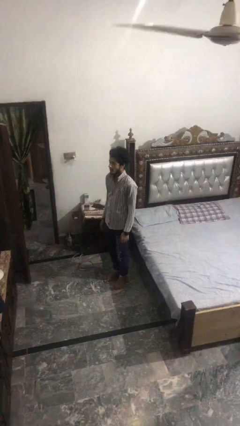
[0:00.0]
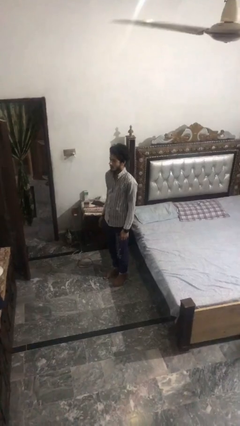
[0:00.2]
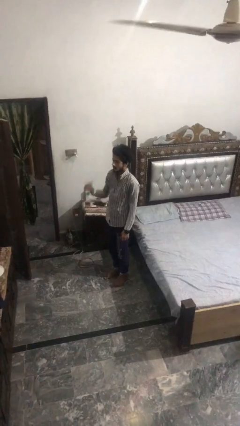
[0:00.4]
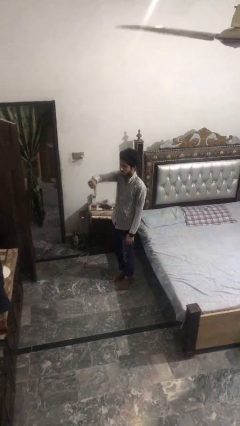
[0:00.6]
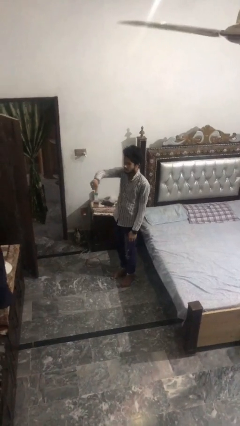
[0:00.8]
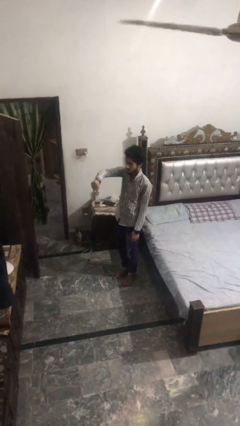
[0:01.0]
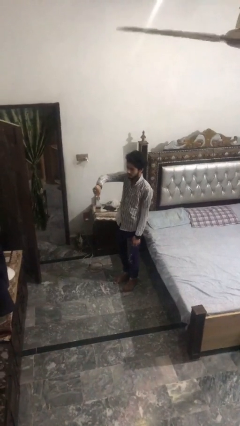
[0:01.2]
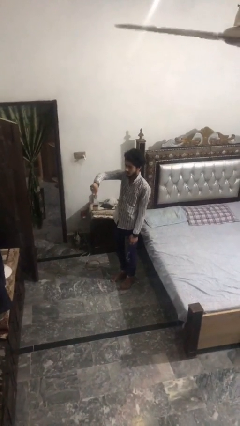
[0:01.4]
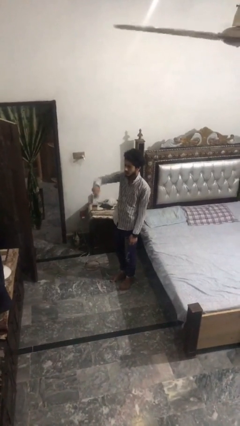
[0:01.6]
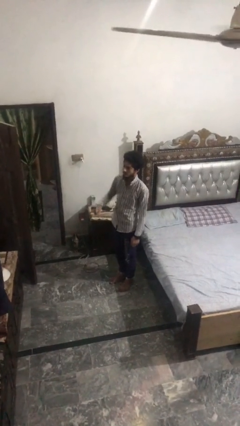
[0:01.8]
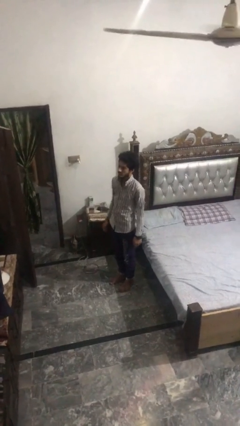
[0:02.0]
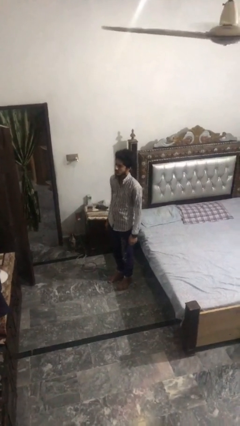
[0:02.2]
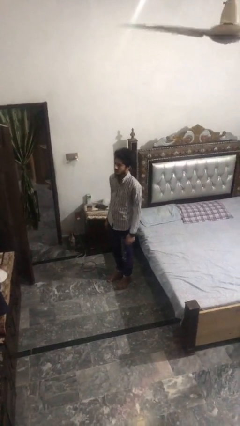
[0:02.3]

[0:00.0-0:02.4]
person gestures thumbs down

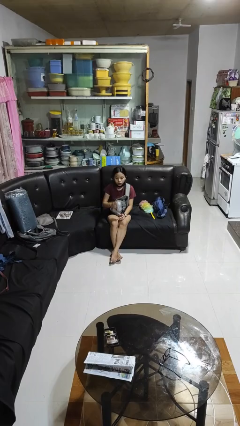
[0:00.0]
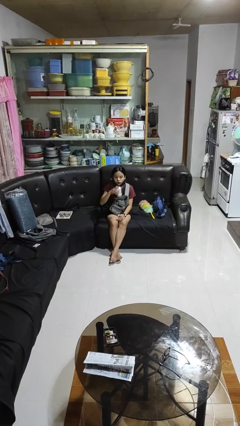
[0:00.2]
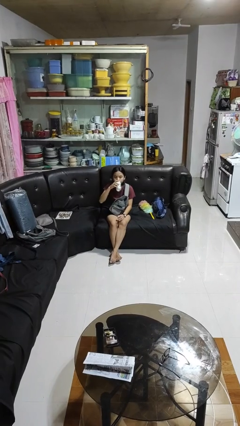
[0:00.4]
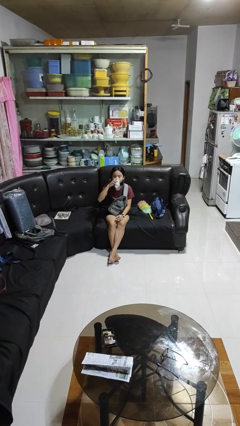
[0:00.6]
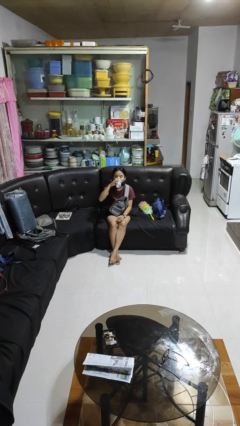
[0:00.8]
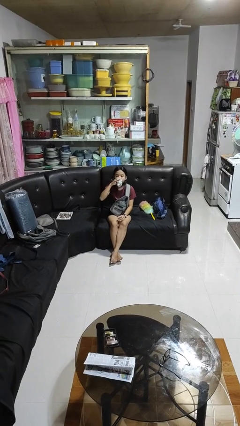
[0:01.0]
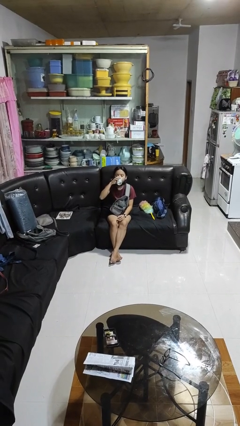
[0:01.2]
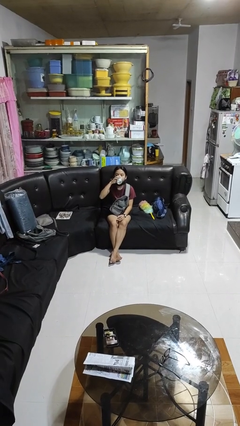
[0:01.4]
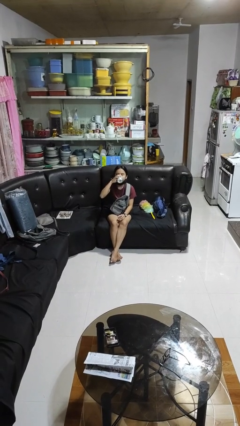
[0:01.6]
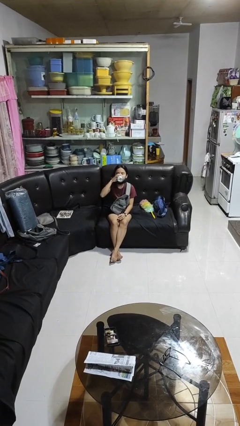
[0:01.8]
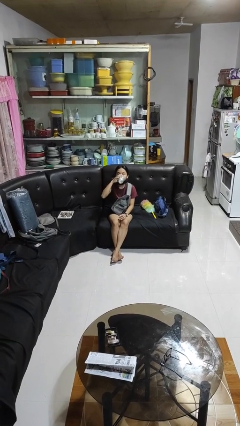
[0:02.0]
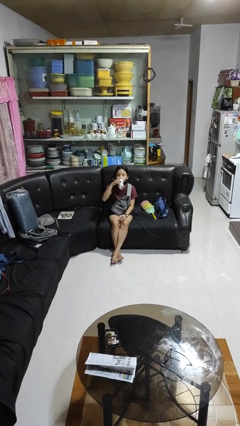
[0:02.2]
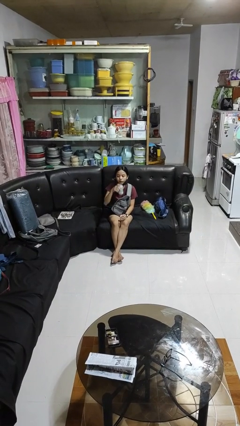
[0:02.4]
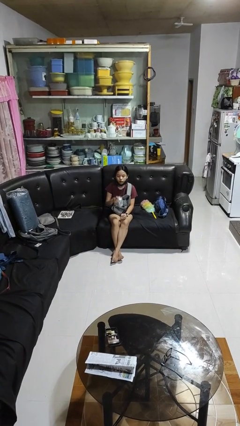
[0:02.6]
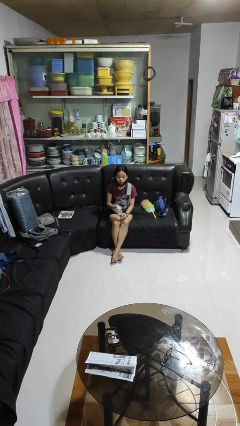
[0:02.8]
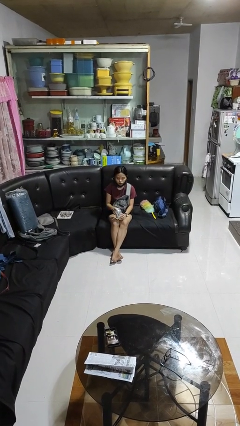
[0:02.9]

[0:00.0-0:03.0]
person drinks from beverage can

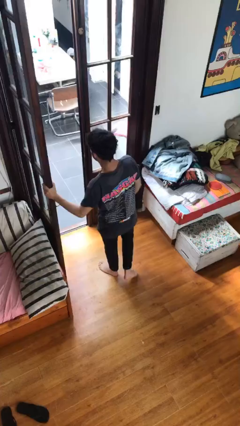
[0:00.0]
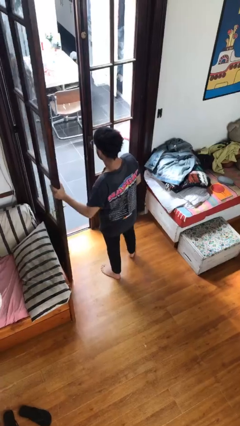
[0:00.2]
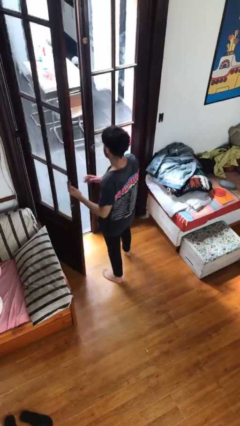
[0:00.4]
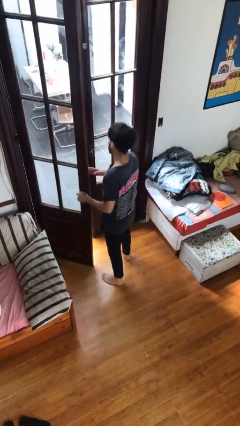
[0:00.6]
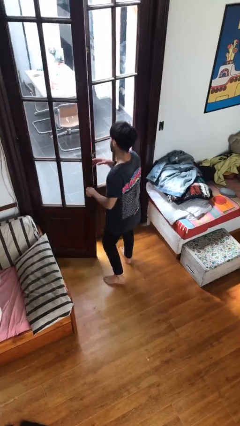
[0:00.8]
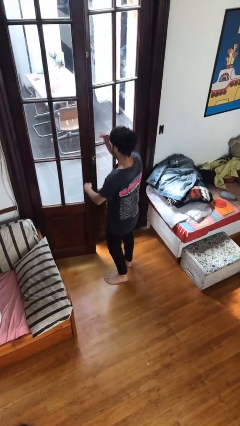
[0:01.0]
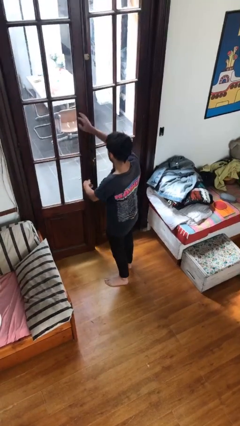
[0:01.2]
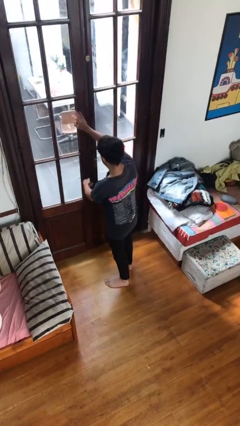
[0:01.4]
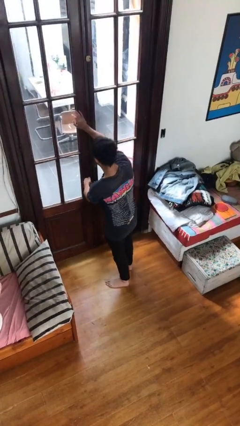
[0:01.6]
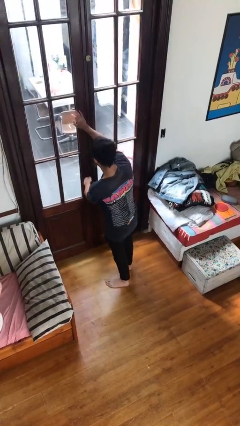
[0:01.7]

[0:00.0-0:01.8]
person closes facility door

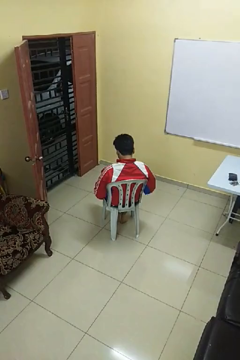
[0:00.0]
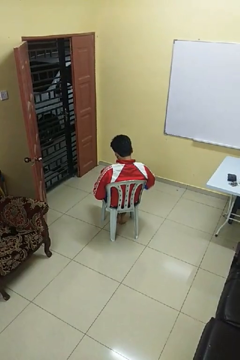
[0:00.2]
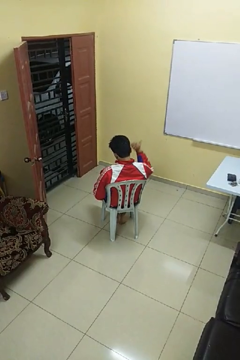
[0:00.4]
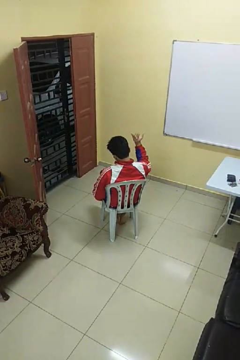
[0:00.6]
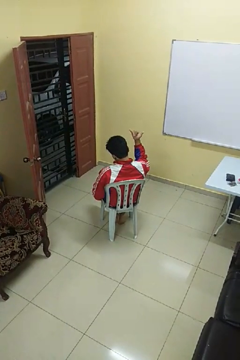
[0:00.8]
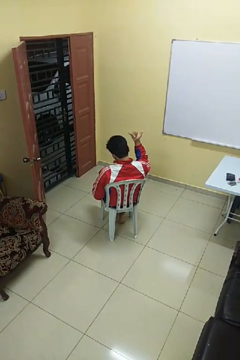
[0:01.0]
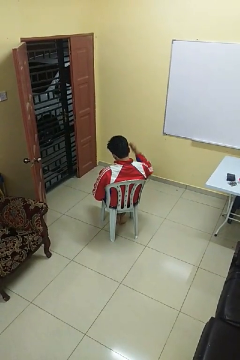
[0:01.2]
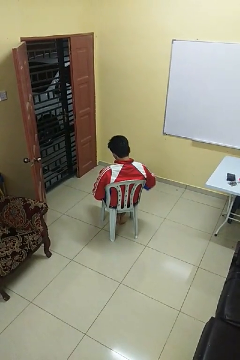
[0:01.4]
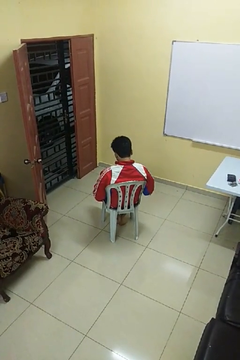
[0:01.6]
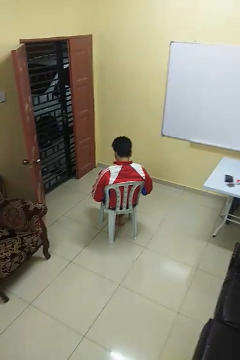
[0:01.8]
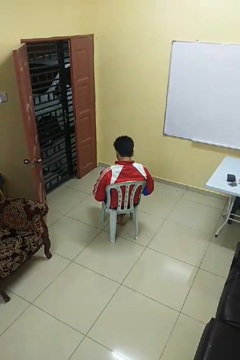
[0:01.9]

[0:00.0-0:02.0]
person gestures hang loose

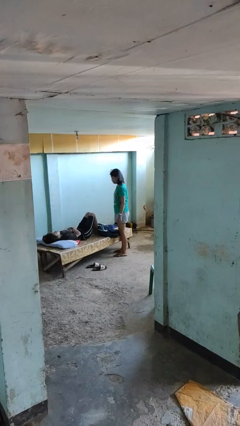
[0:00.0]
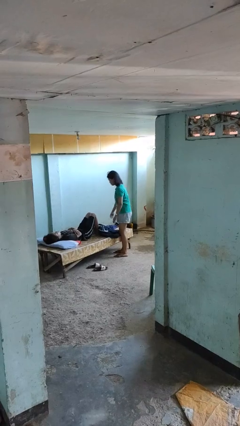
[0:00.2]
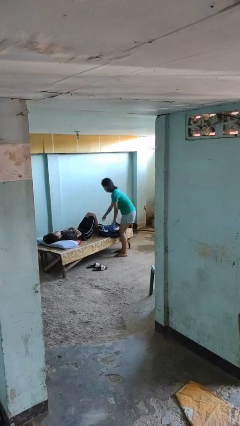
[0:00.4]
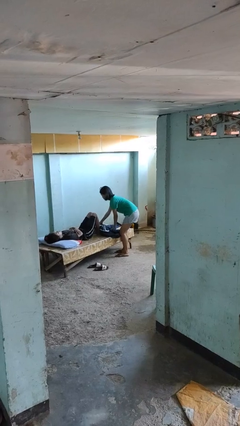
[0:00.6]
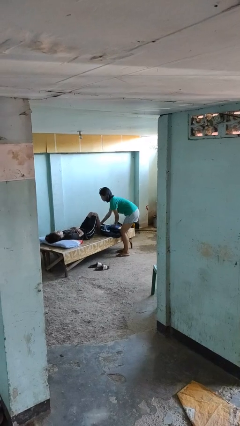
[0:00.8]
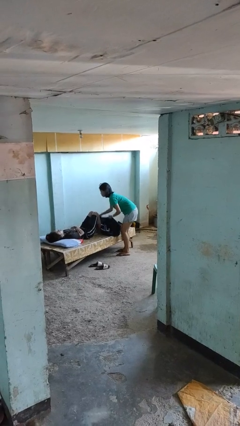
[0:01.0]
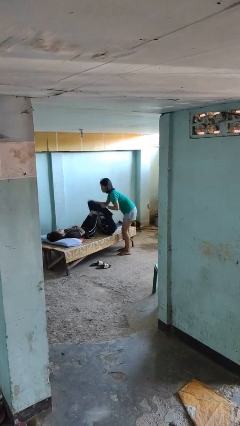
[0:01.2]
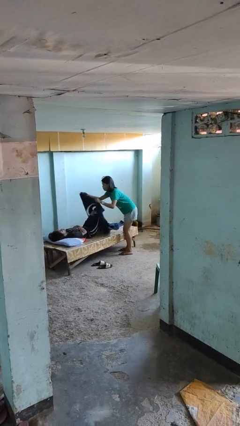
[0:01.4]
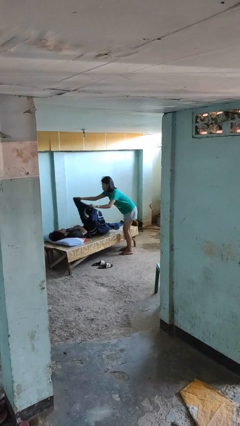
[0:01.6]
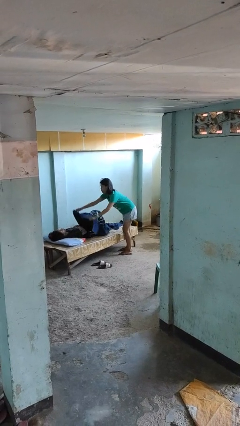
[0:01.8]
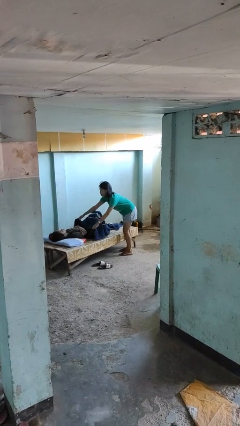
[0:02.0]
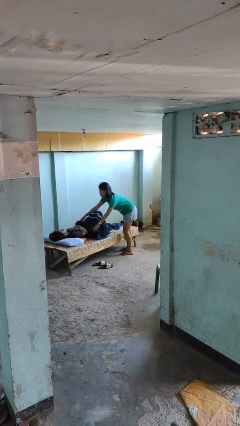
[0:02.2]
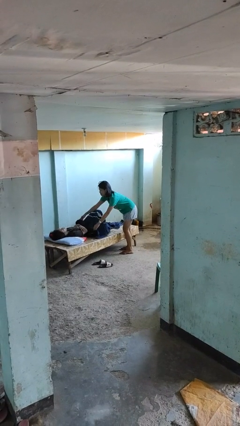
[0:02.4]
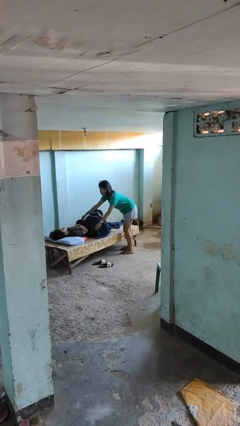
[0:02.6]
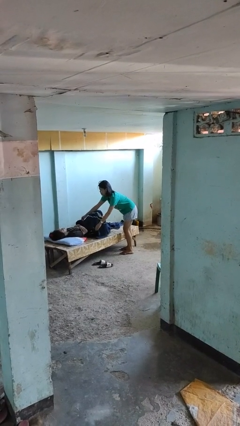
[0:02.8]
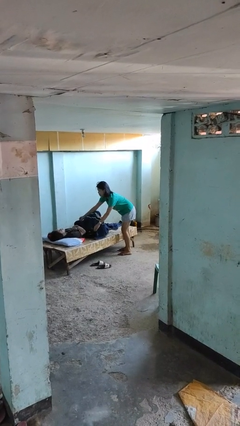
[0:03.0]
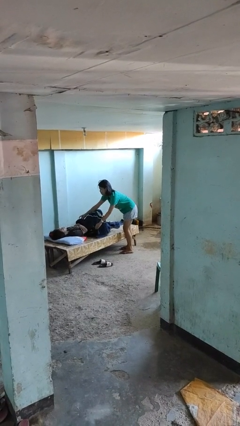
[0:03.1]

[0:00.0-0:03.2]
person covers friend with blanket

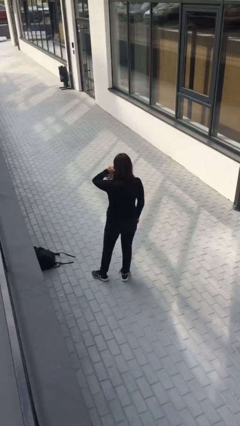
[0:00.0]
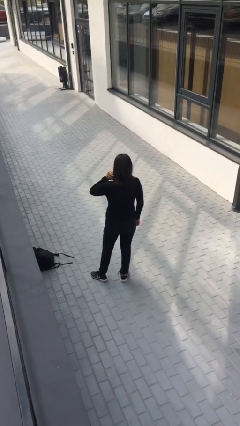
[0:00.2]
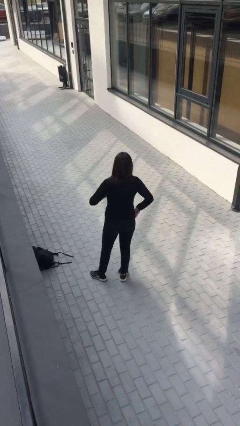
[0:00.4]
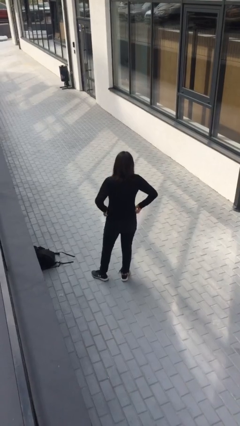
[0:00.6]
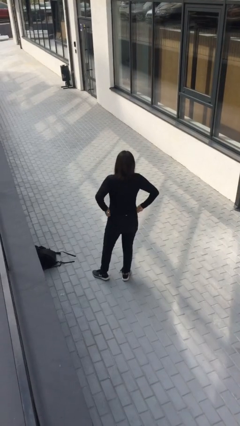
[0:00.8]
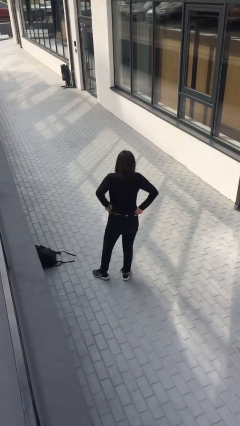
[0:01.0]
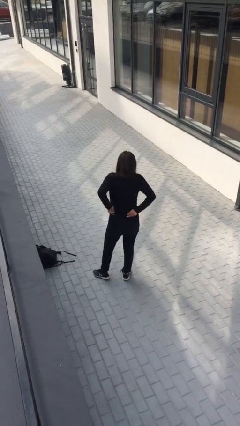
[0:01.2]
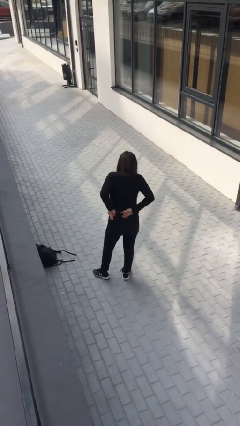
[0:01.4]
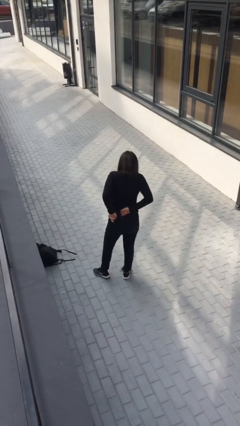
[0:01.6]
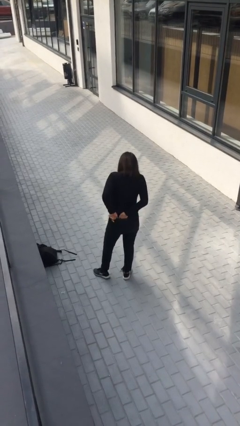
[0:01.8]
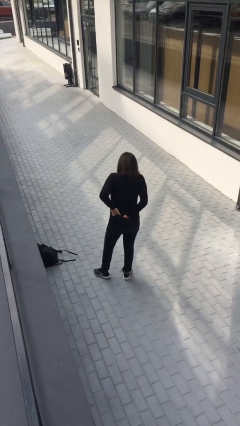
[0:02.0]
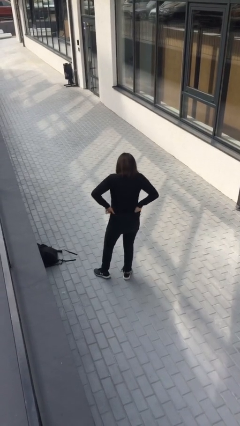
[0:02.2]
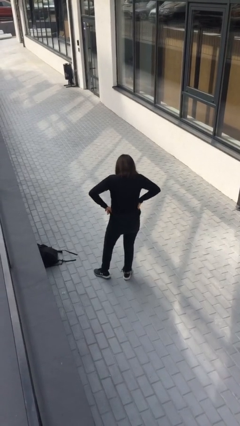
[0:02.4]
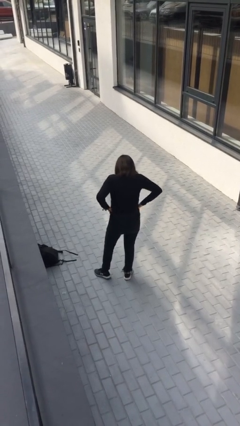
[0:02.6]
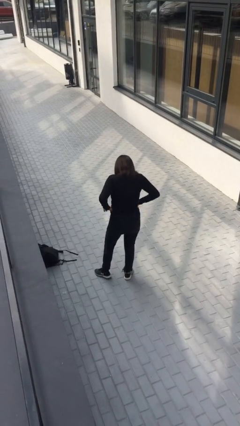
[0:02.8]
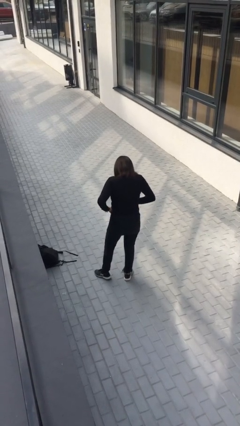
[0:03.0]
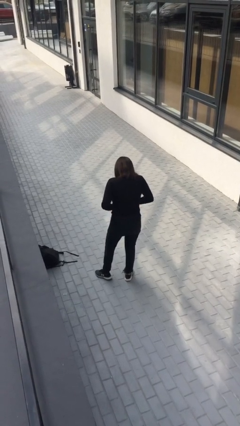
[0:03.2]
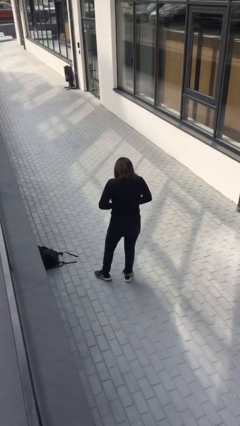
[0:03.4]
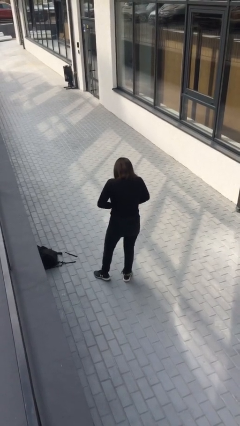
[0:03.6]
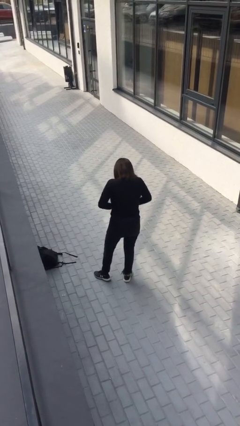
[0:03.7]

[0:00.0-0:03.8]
person tucks in shirt

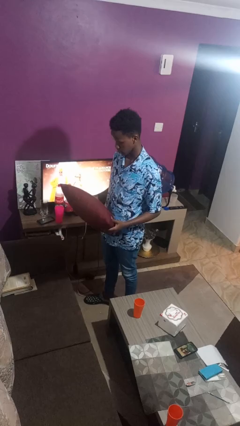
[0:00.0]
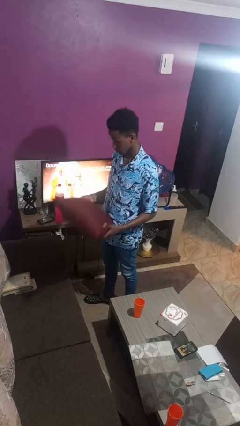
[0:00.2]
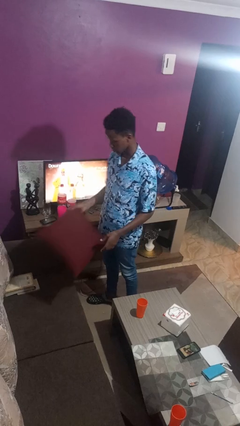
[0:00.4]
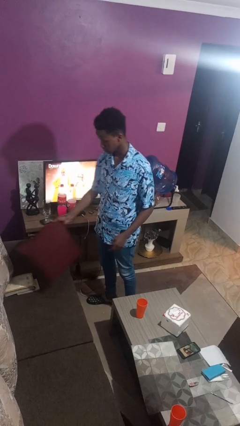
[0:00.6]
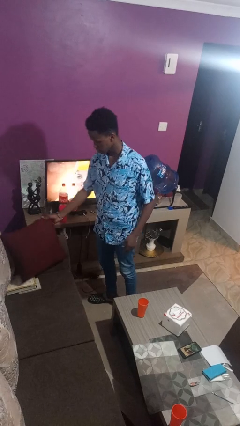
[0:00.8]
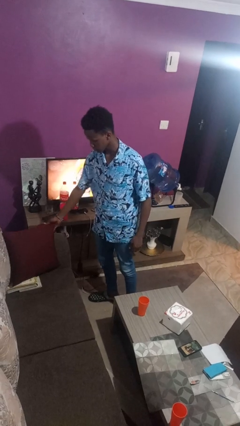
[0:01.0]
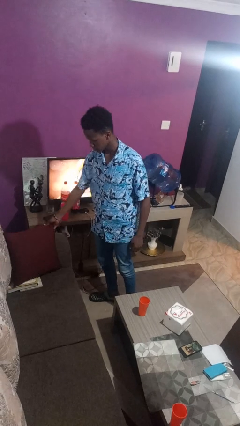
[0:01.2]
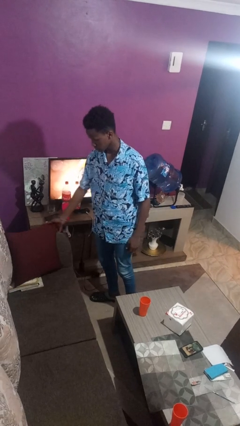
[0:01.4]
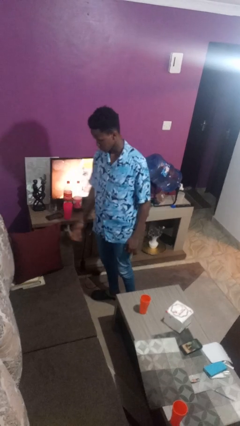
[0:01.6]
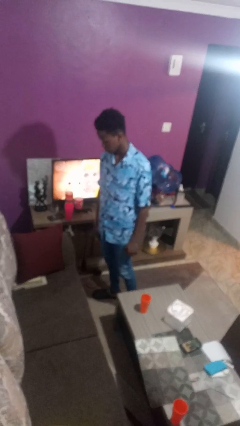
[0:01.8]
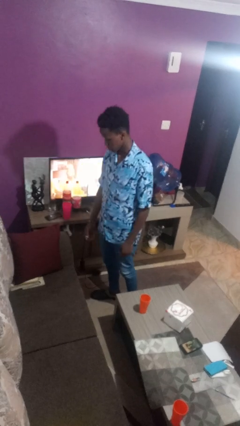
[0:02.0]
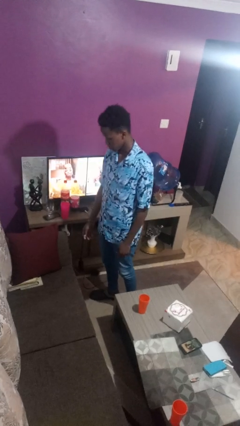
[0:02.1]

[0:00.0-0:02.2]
person puts down object on couch
